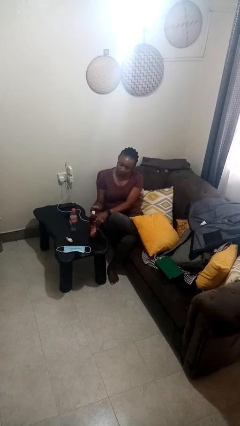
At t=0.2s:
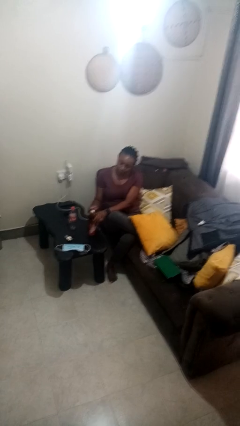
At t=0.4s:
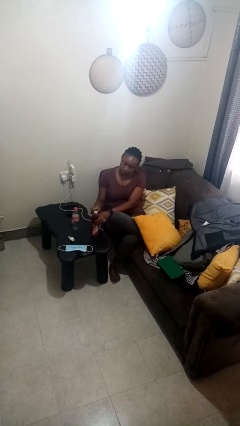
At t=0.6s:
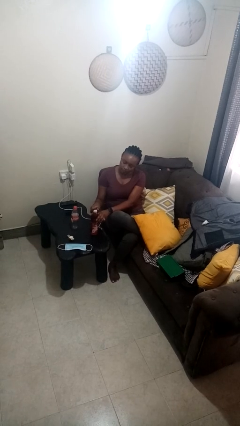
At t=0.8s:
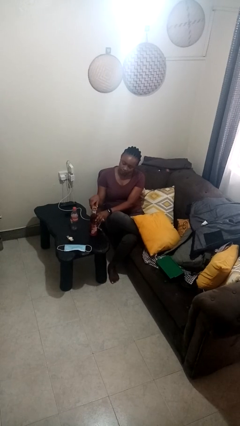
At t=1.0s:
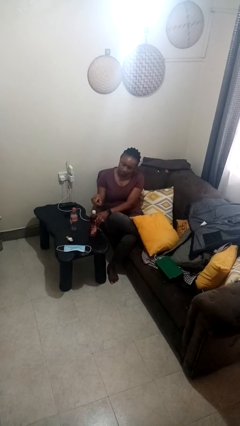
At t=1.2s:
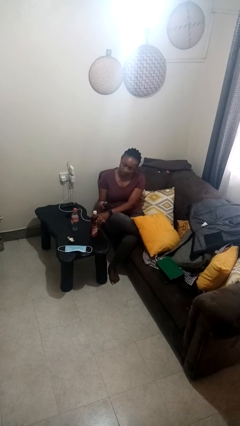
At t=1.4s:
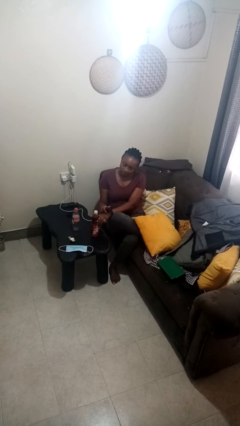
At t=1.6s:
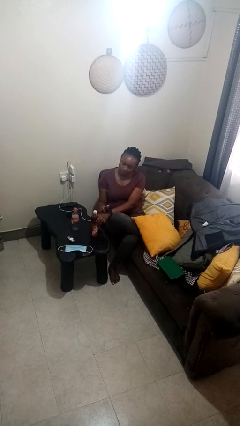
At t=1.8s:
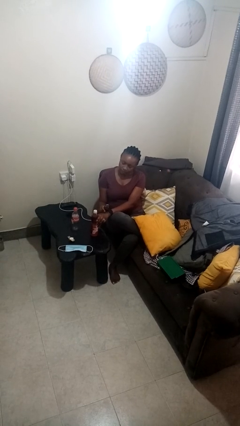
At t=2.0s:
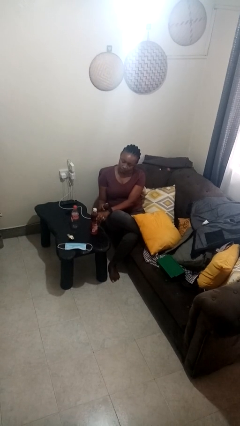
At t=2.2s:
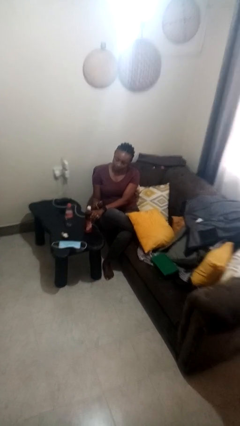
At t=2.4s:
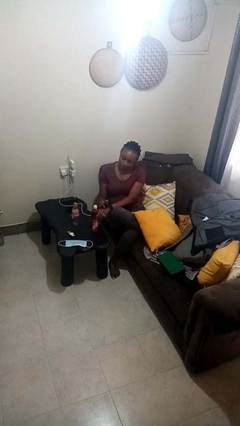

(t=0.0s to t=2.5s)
person opens can with can opener

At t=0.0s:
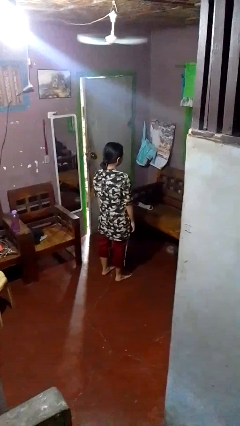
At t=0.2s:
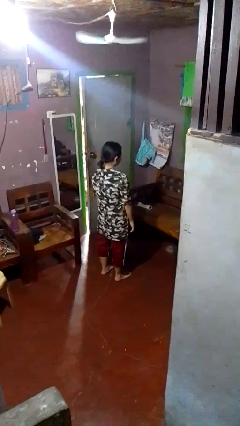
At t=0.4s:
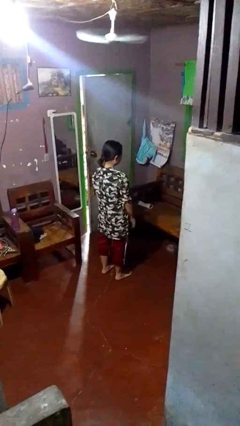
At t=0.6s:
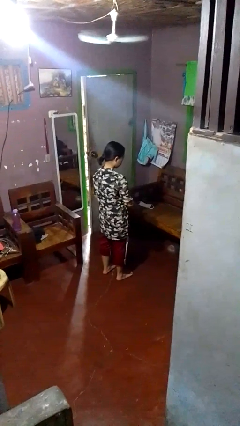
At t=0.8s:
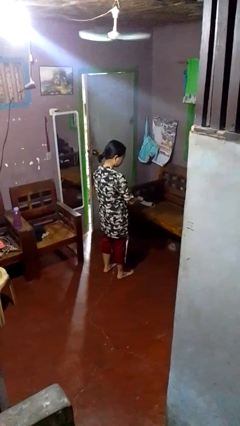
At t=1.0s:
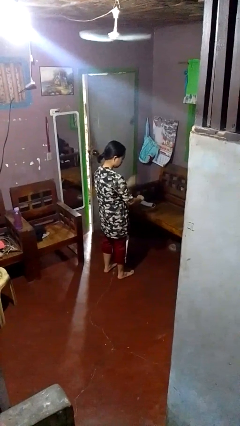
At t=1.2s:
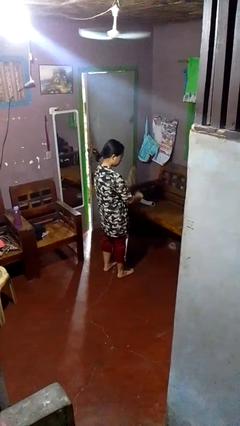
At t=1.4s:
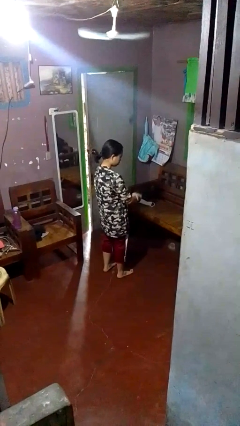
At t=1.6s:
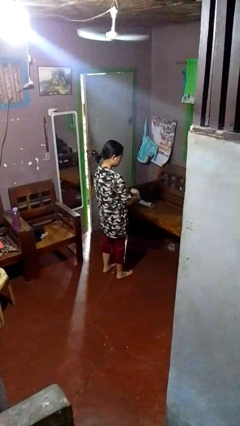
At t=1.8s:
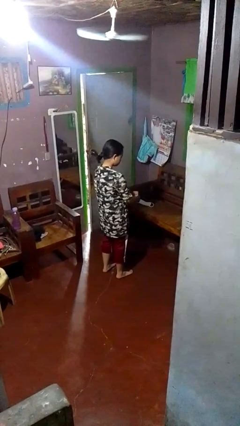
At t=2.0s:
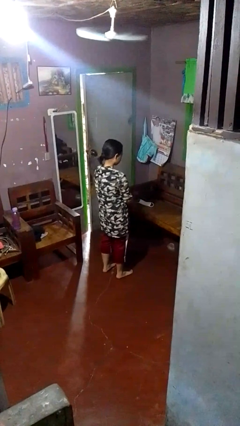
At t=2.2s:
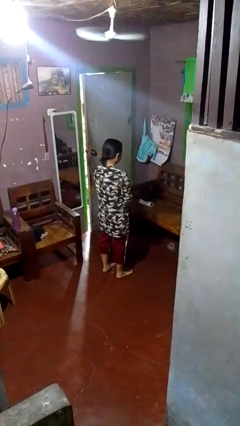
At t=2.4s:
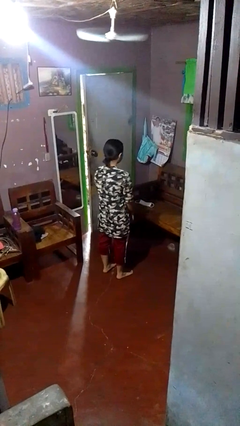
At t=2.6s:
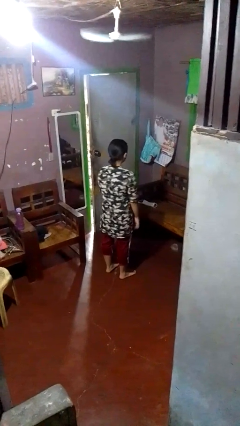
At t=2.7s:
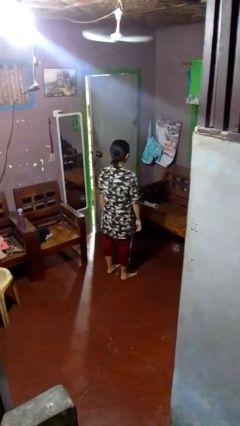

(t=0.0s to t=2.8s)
person swats bug

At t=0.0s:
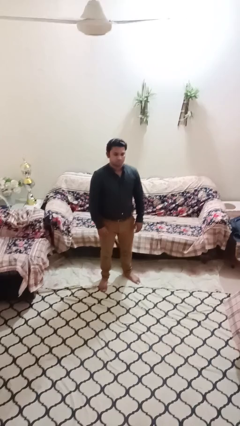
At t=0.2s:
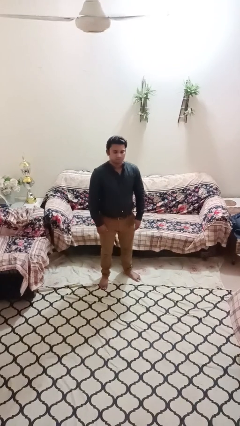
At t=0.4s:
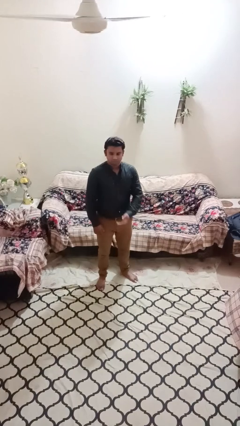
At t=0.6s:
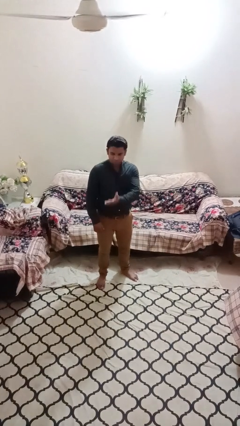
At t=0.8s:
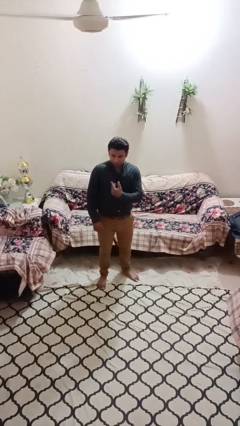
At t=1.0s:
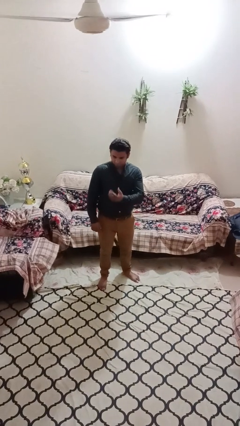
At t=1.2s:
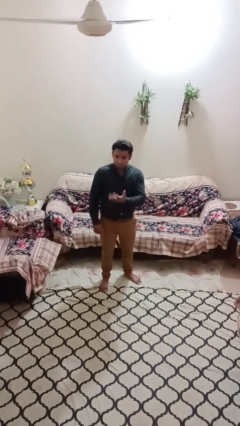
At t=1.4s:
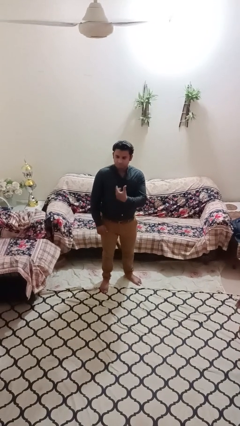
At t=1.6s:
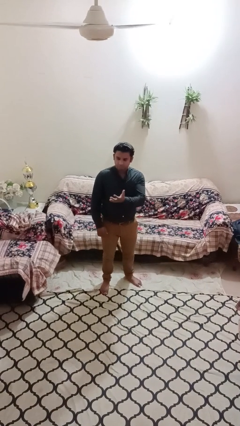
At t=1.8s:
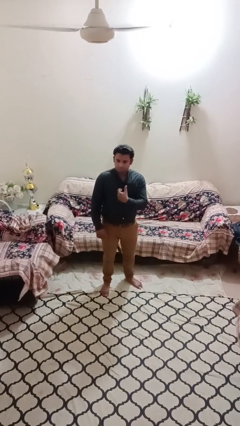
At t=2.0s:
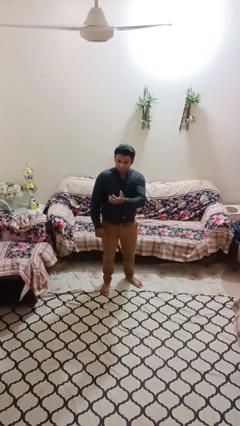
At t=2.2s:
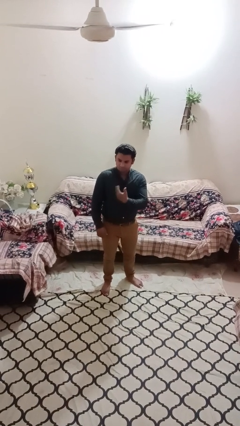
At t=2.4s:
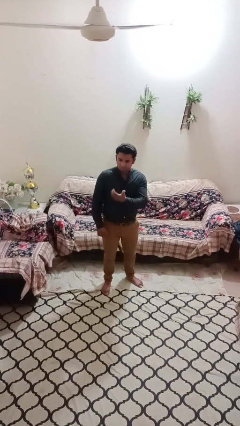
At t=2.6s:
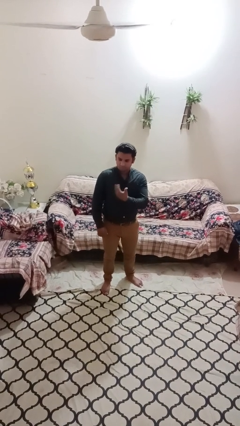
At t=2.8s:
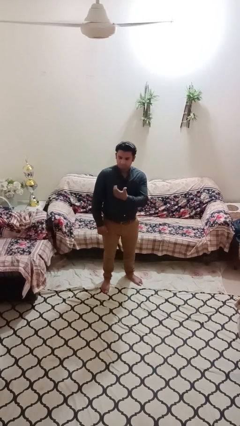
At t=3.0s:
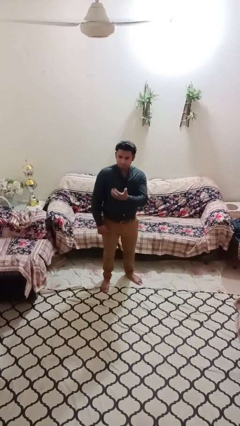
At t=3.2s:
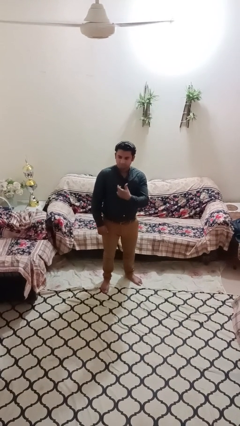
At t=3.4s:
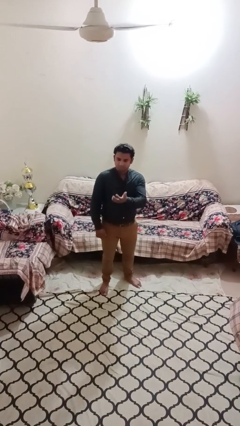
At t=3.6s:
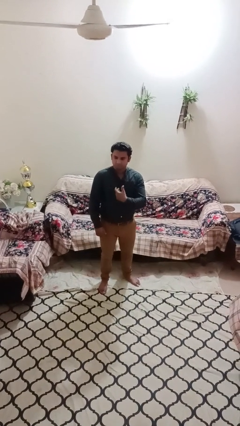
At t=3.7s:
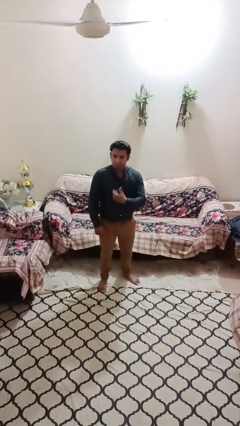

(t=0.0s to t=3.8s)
person gestures come here

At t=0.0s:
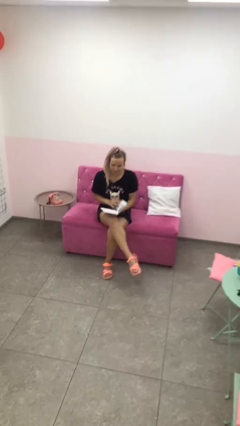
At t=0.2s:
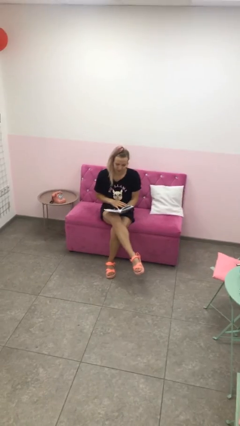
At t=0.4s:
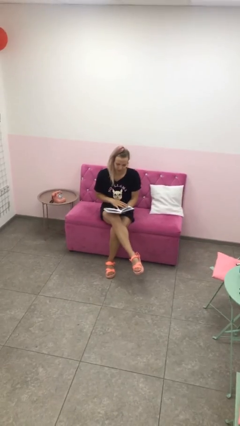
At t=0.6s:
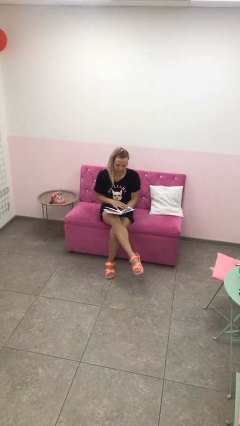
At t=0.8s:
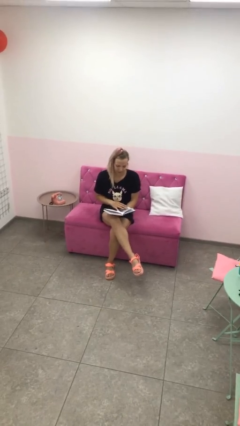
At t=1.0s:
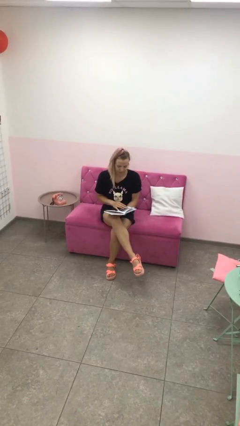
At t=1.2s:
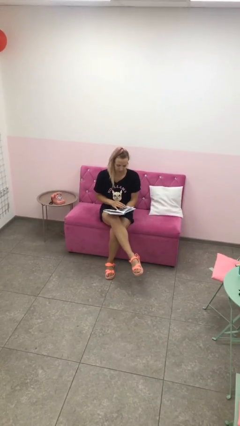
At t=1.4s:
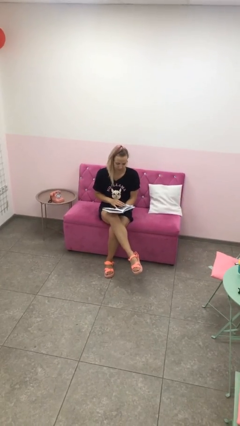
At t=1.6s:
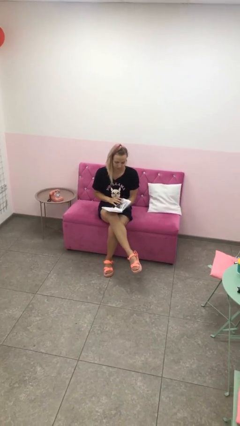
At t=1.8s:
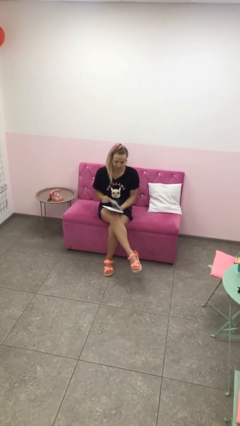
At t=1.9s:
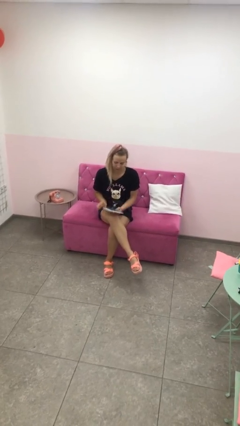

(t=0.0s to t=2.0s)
person reads book

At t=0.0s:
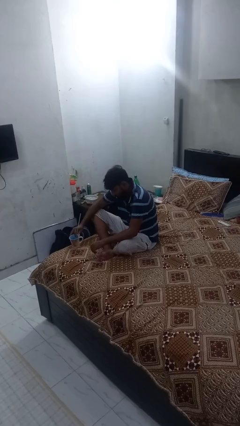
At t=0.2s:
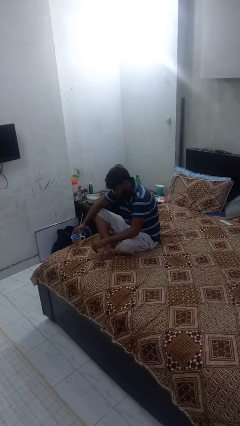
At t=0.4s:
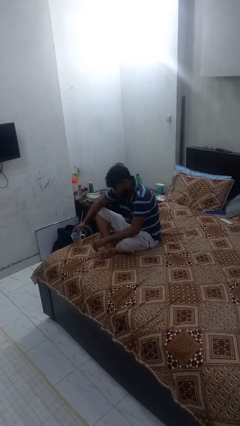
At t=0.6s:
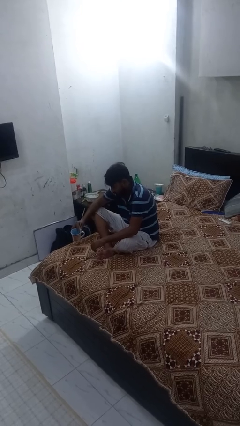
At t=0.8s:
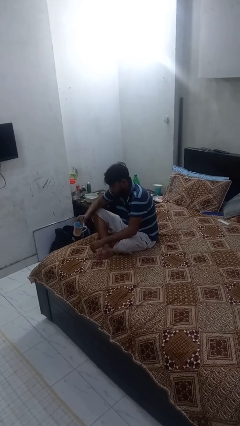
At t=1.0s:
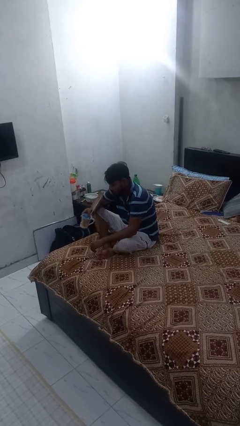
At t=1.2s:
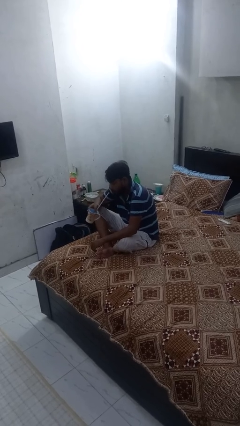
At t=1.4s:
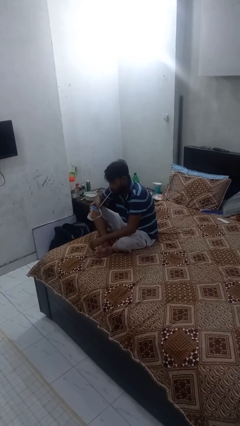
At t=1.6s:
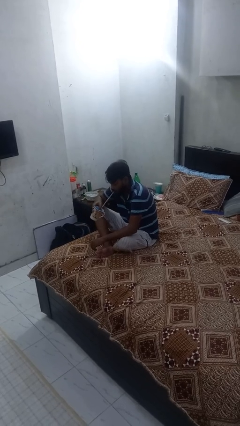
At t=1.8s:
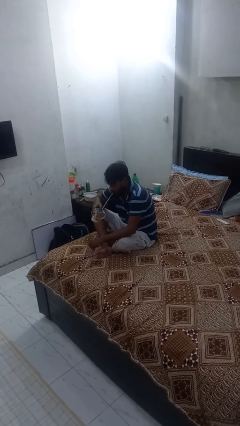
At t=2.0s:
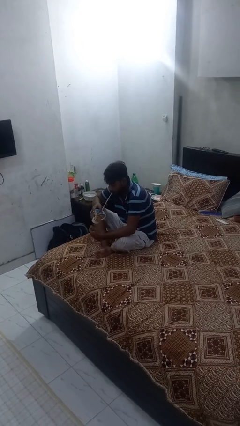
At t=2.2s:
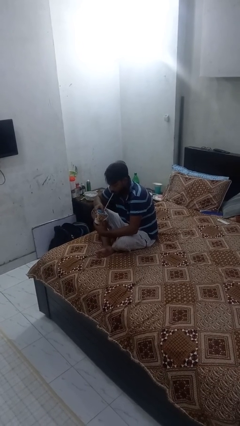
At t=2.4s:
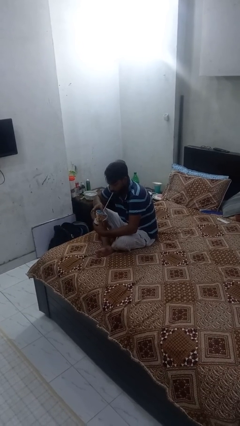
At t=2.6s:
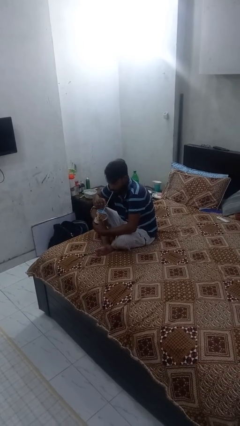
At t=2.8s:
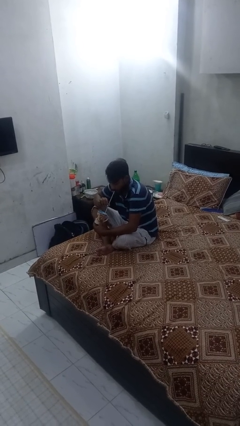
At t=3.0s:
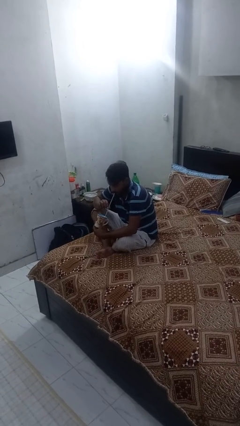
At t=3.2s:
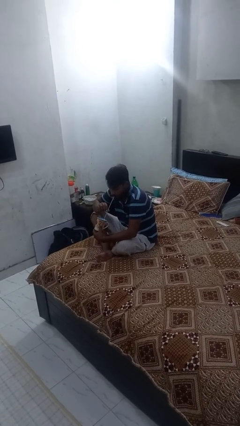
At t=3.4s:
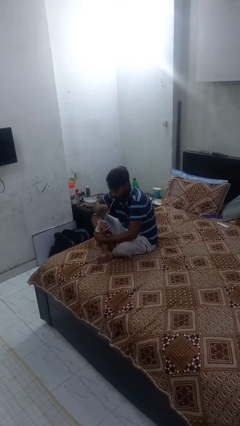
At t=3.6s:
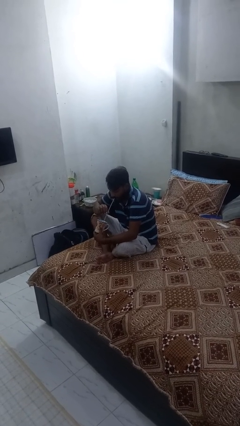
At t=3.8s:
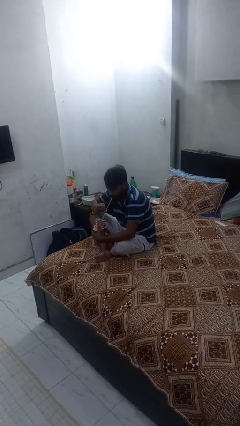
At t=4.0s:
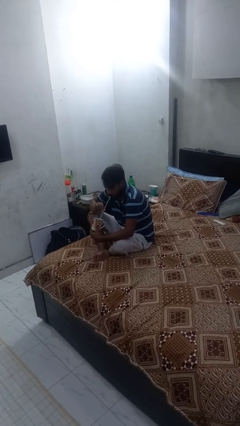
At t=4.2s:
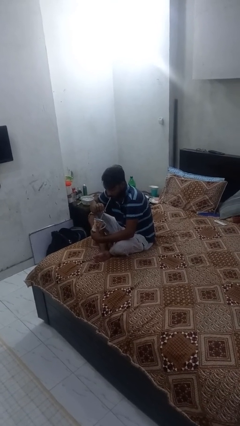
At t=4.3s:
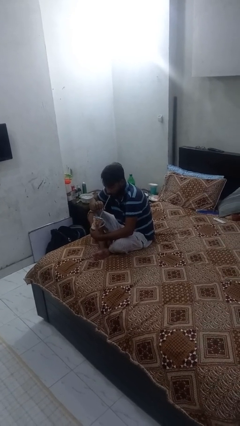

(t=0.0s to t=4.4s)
person drinks from straw

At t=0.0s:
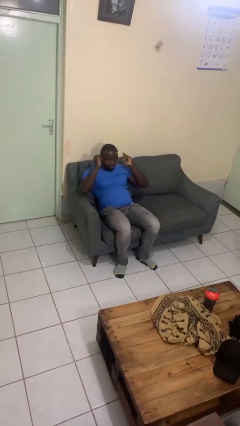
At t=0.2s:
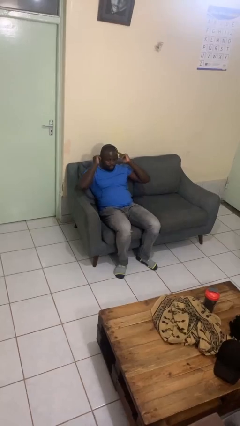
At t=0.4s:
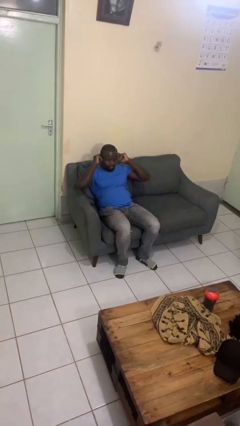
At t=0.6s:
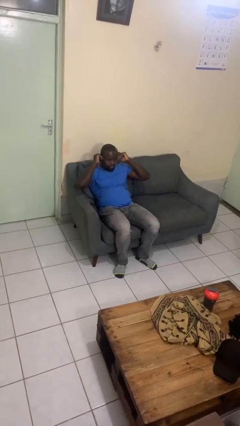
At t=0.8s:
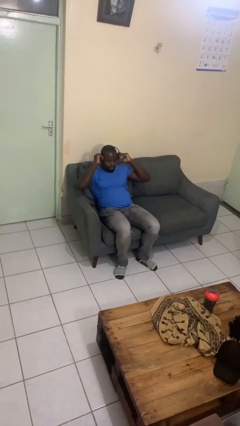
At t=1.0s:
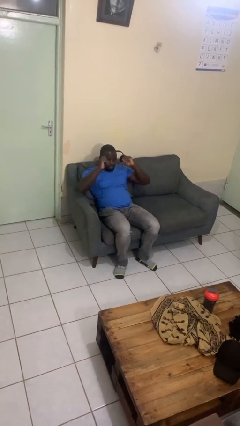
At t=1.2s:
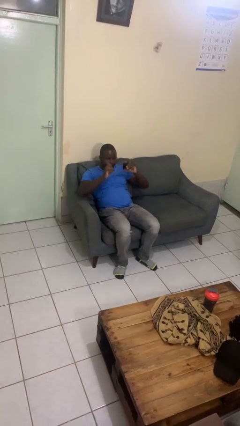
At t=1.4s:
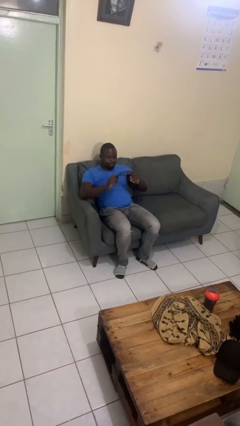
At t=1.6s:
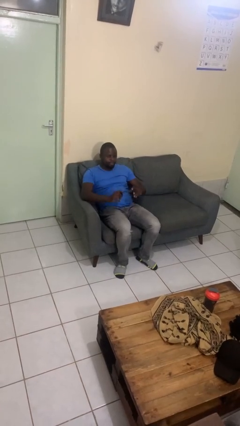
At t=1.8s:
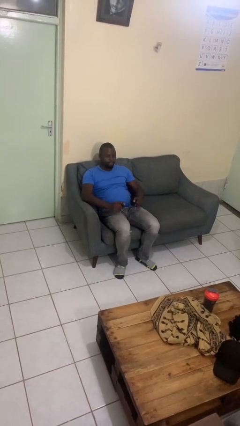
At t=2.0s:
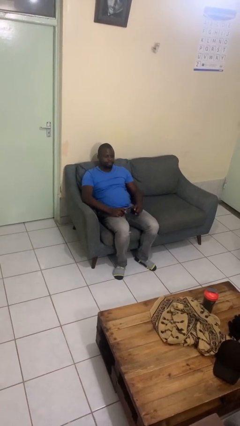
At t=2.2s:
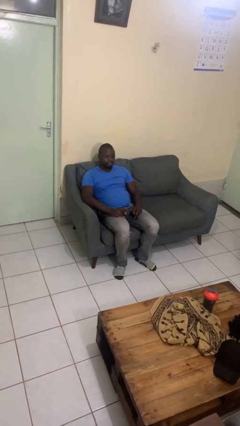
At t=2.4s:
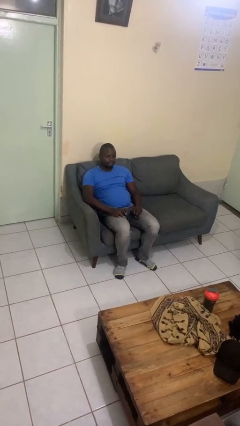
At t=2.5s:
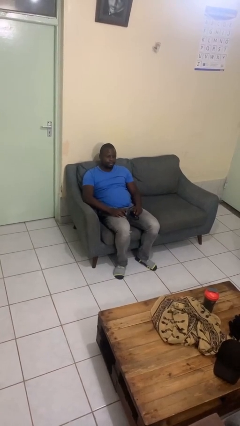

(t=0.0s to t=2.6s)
person takes off headphones
